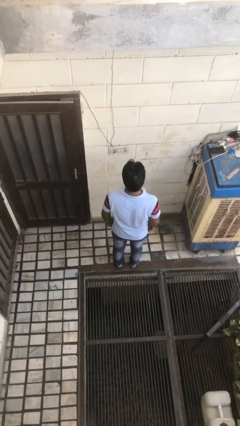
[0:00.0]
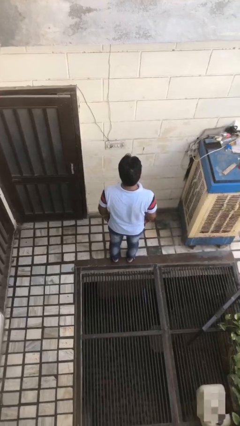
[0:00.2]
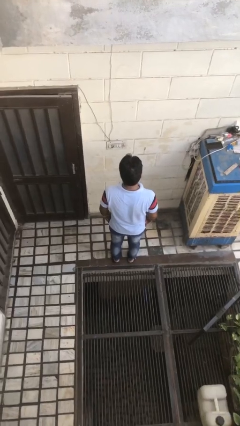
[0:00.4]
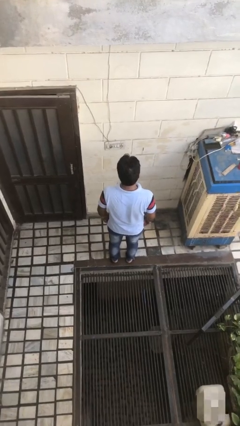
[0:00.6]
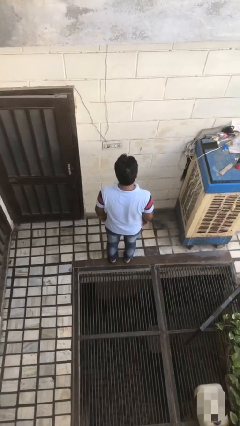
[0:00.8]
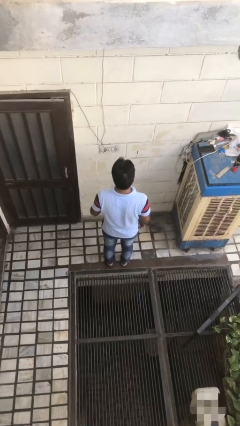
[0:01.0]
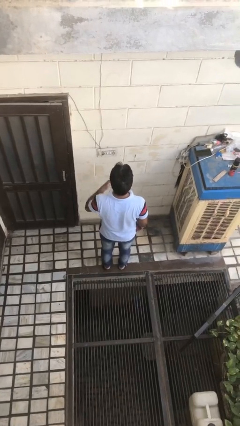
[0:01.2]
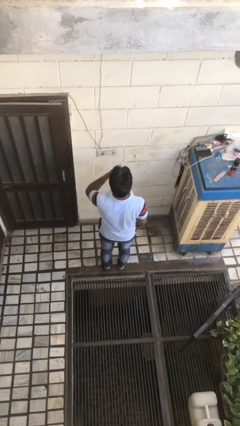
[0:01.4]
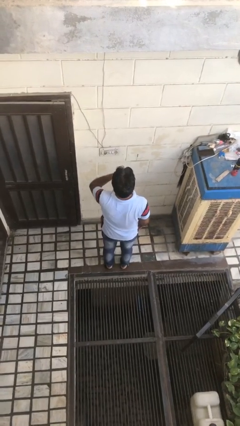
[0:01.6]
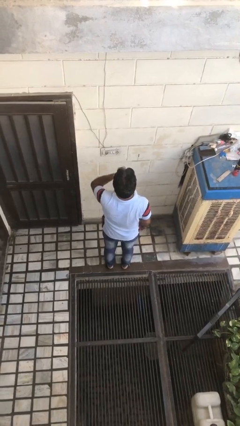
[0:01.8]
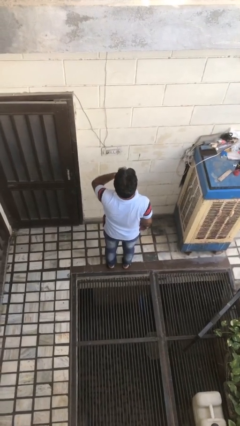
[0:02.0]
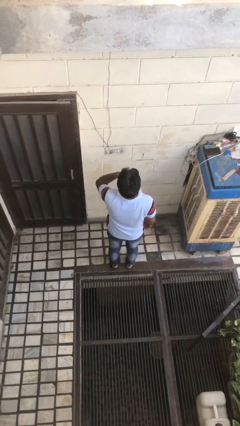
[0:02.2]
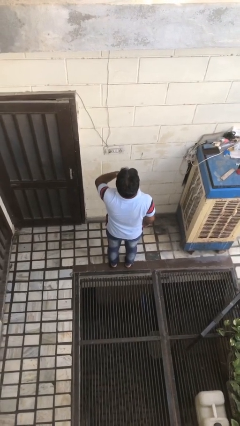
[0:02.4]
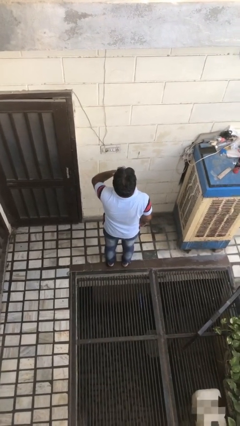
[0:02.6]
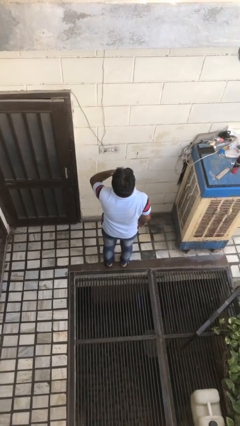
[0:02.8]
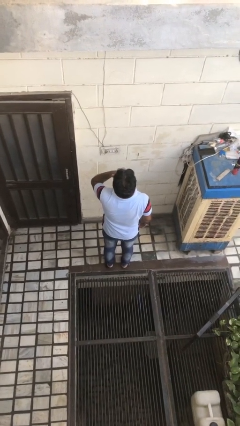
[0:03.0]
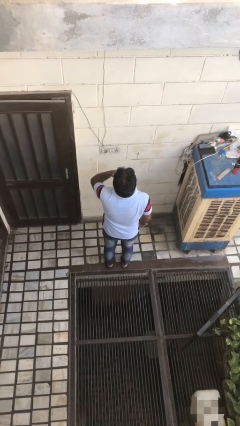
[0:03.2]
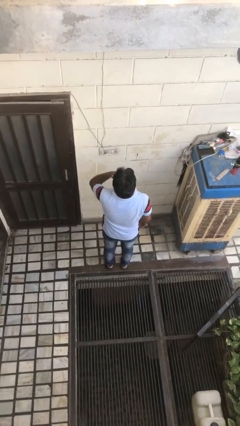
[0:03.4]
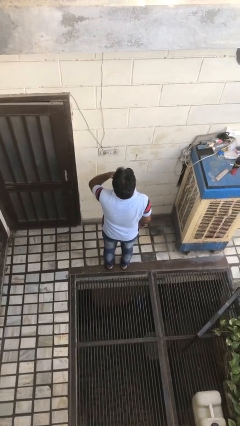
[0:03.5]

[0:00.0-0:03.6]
person yawns

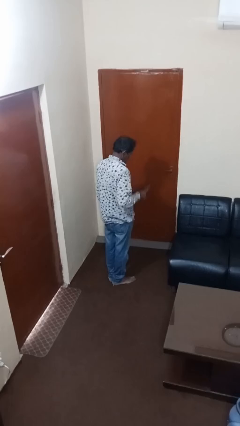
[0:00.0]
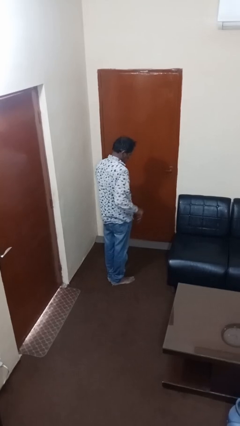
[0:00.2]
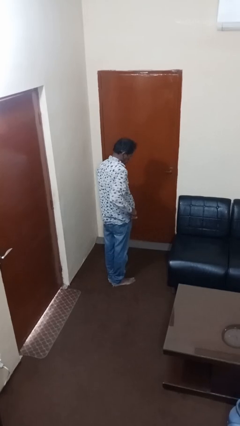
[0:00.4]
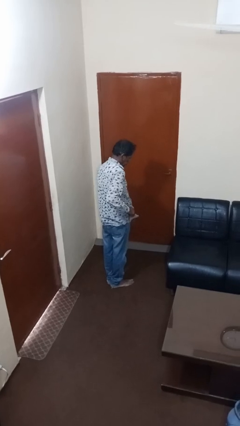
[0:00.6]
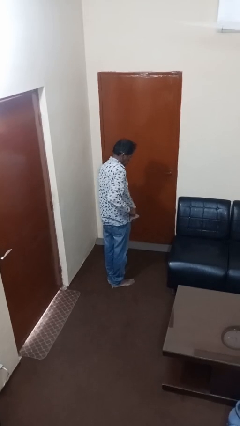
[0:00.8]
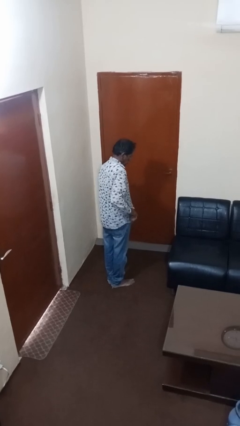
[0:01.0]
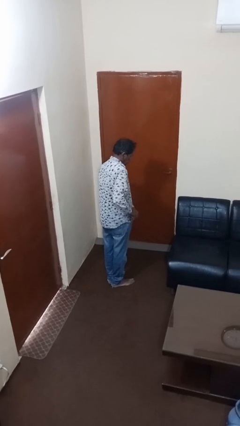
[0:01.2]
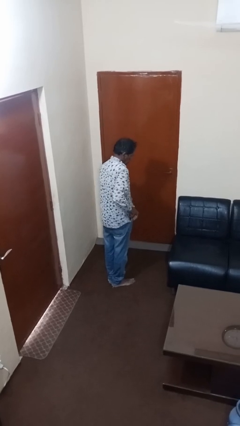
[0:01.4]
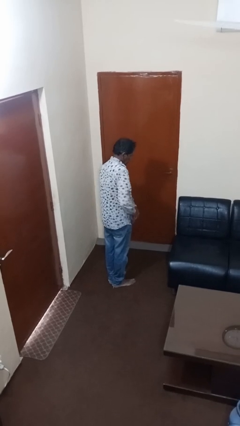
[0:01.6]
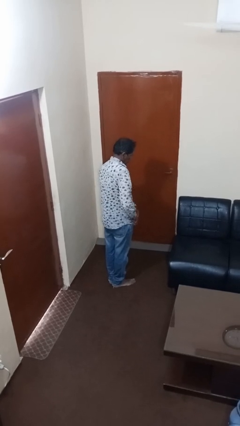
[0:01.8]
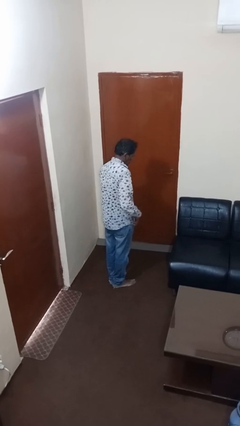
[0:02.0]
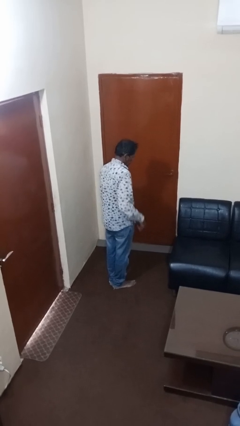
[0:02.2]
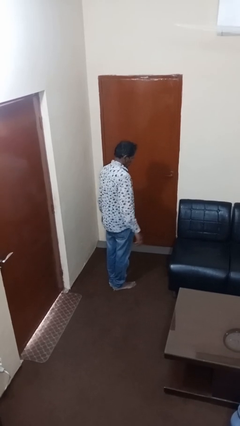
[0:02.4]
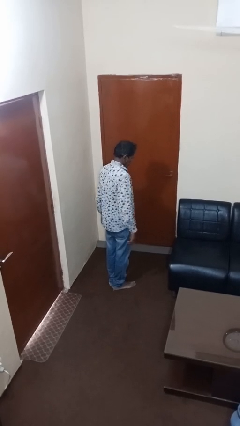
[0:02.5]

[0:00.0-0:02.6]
person puts phone into pocket

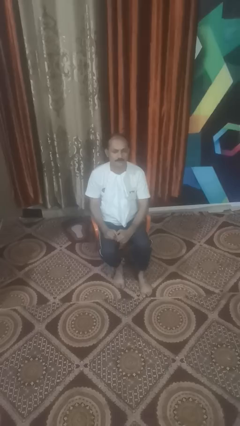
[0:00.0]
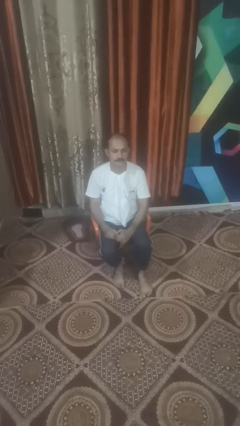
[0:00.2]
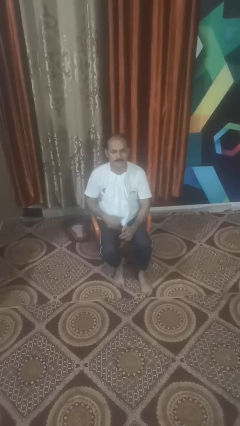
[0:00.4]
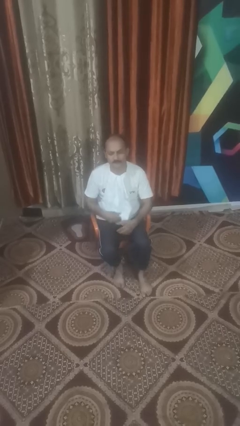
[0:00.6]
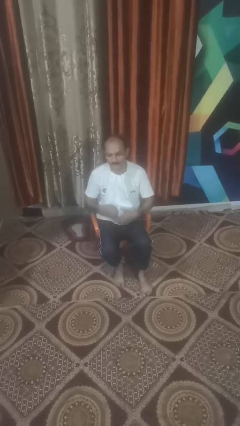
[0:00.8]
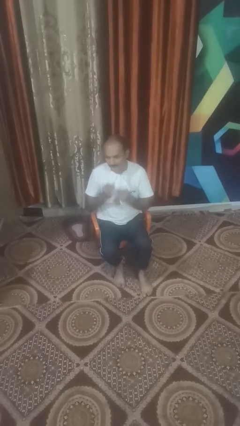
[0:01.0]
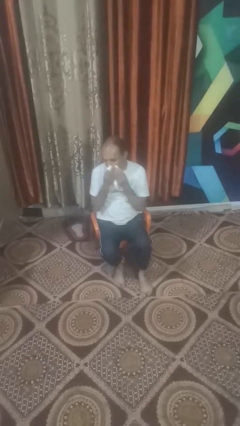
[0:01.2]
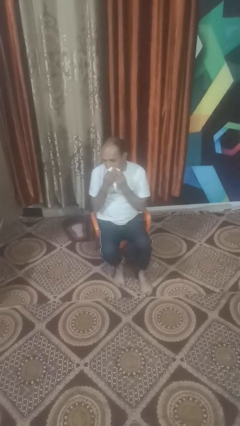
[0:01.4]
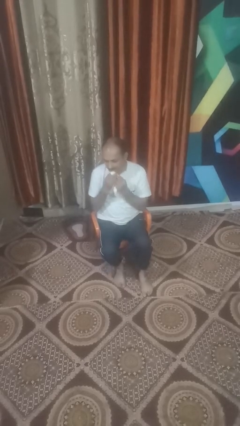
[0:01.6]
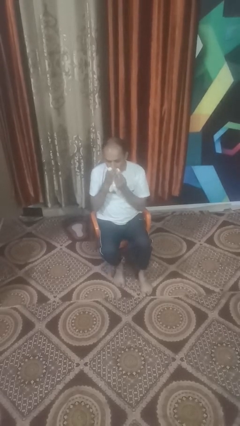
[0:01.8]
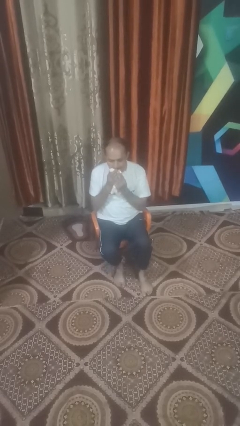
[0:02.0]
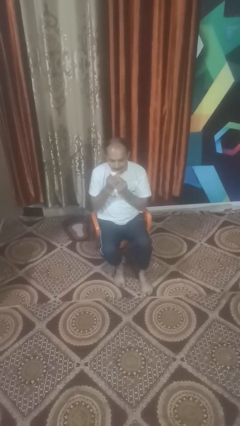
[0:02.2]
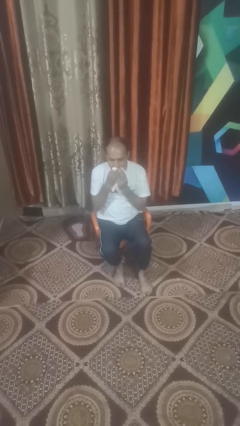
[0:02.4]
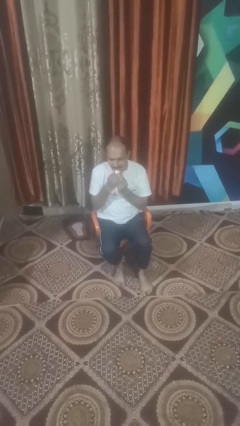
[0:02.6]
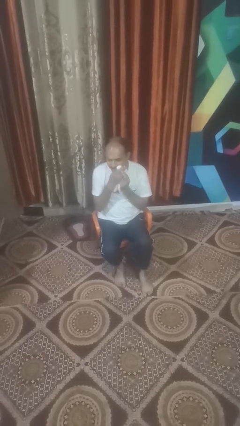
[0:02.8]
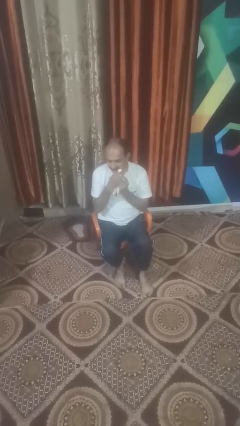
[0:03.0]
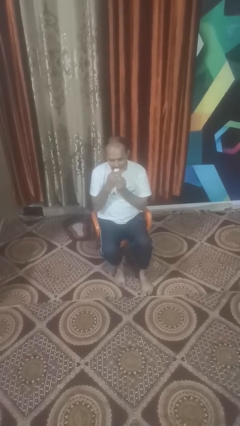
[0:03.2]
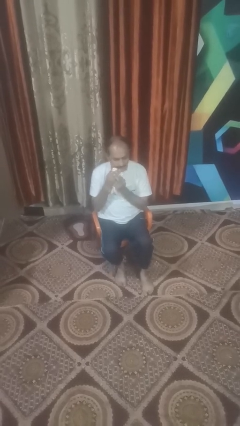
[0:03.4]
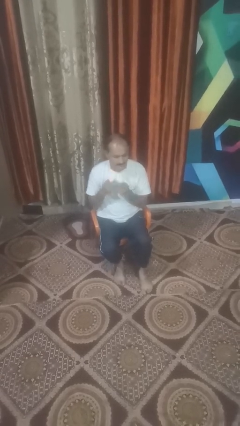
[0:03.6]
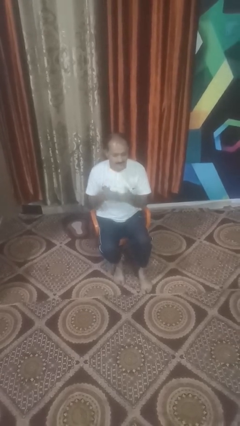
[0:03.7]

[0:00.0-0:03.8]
person wipes mouth with napkin

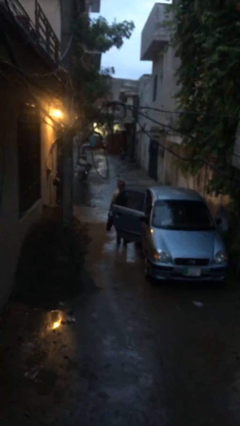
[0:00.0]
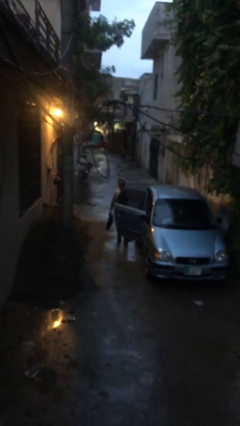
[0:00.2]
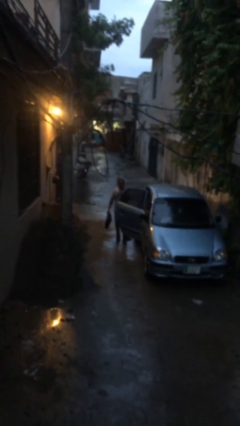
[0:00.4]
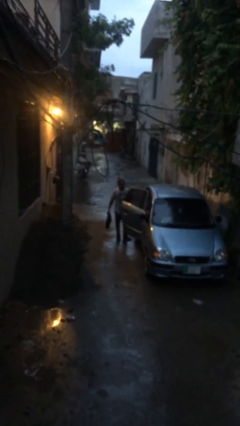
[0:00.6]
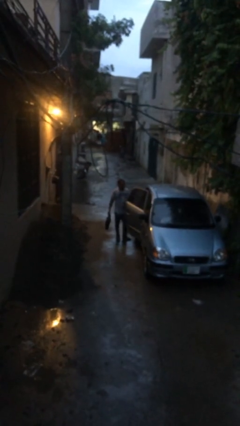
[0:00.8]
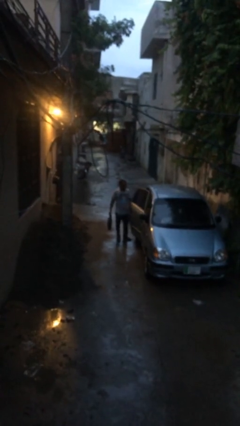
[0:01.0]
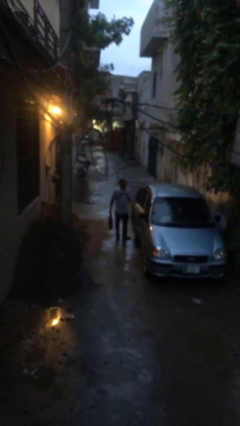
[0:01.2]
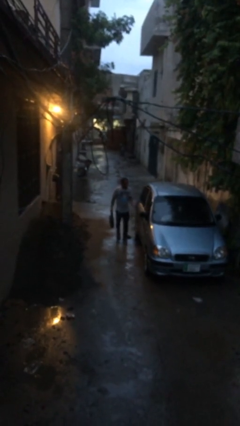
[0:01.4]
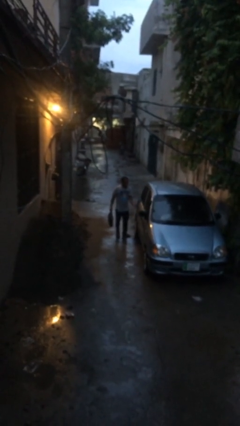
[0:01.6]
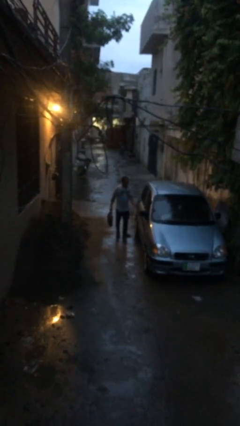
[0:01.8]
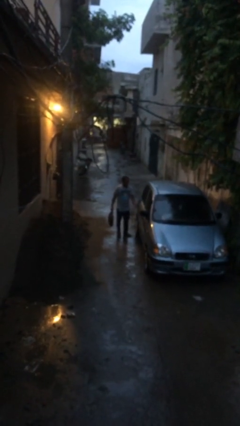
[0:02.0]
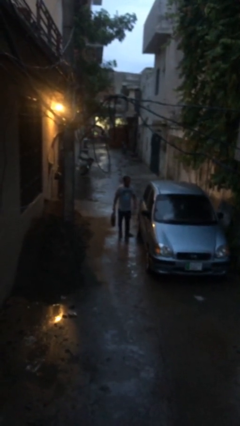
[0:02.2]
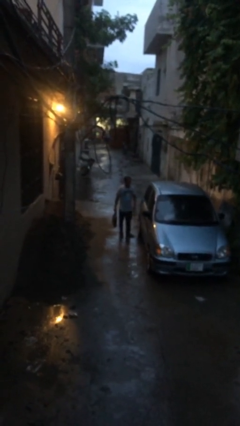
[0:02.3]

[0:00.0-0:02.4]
person closes car door

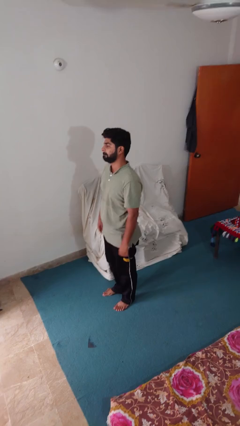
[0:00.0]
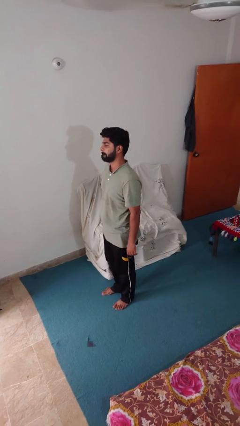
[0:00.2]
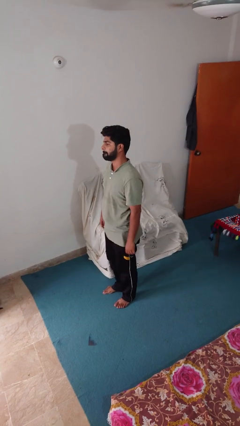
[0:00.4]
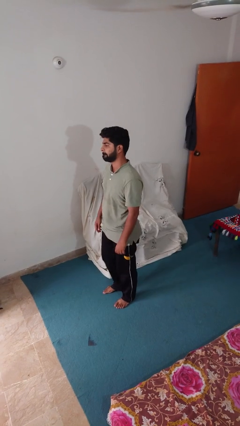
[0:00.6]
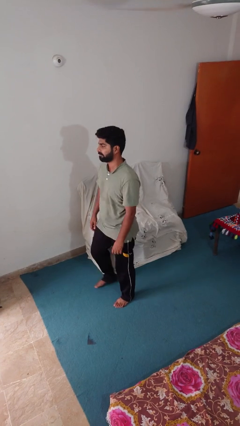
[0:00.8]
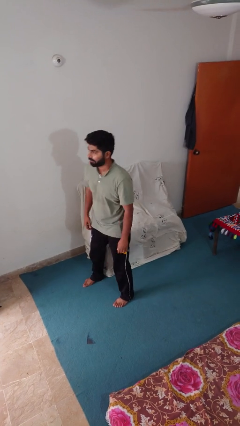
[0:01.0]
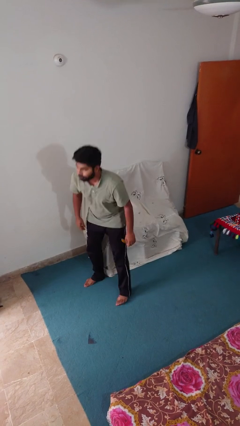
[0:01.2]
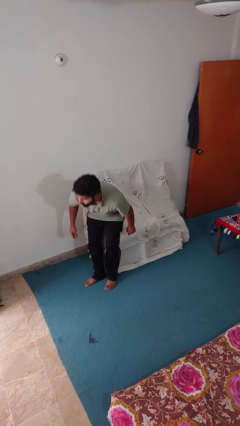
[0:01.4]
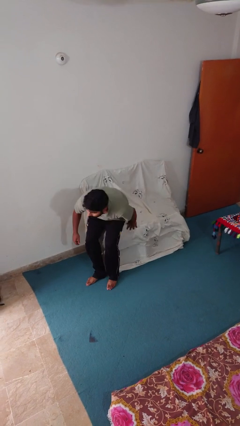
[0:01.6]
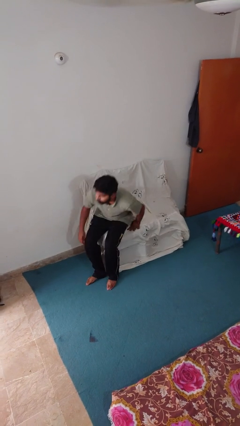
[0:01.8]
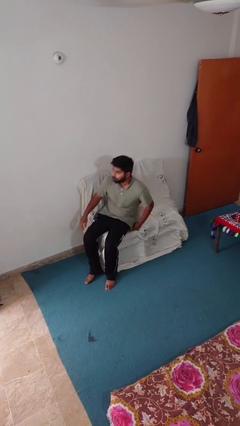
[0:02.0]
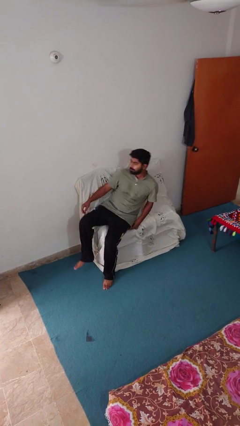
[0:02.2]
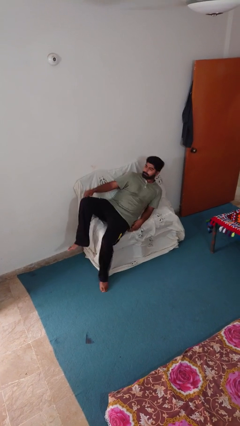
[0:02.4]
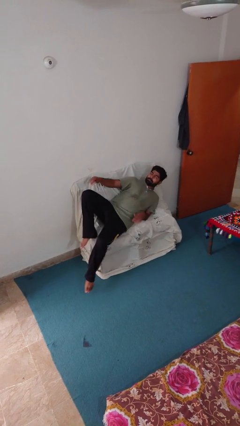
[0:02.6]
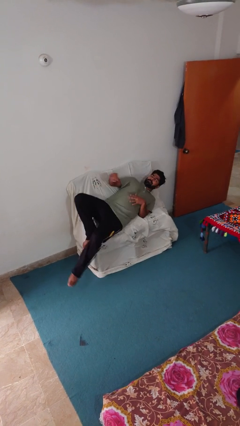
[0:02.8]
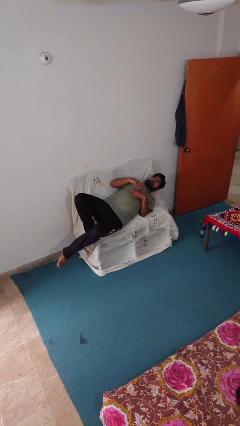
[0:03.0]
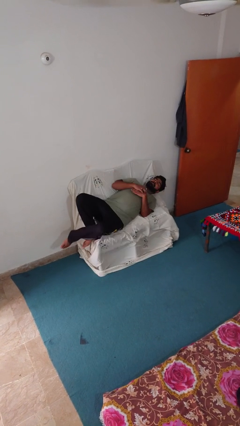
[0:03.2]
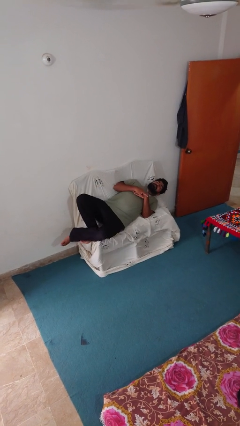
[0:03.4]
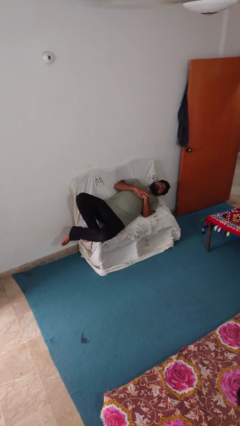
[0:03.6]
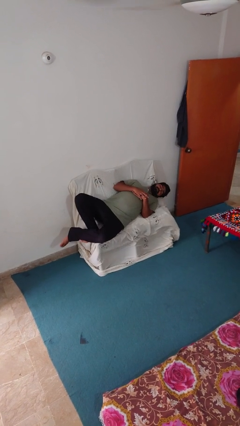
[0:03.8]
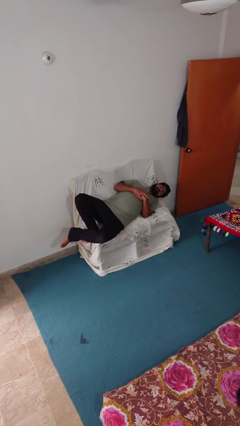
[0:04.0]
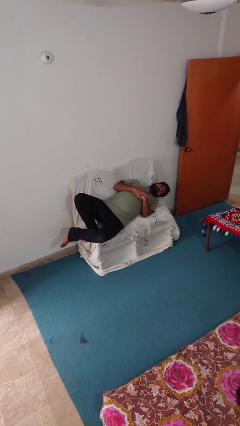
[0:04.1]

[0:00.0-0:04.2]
person lies down on couch

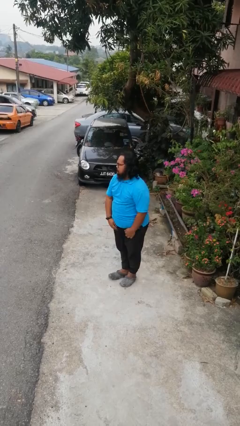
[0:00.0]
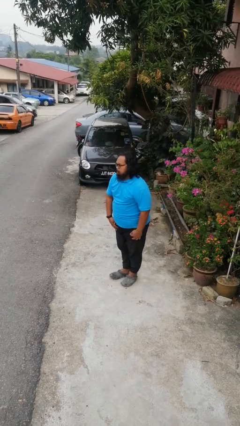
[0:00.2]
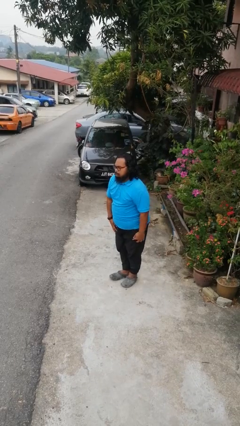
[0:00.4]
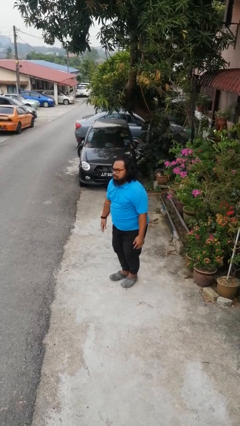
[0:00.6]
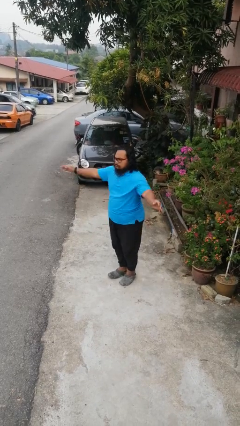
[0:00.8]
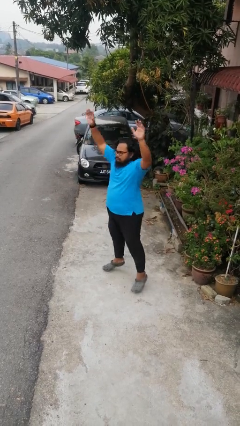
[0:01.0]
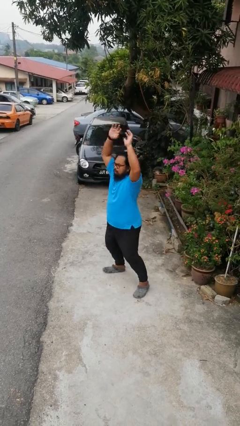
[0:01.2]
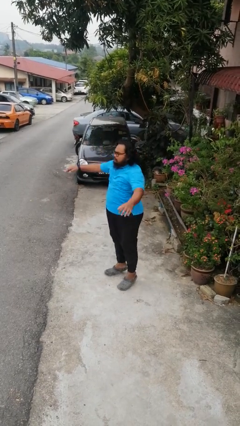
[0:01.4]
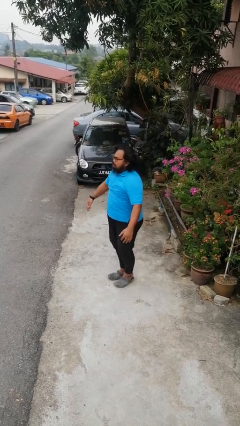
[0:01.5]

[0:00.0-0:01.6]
person exercises with jumping jacks
